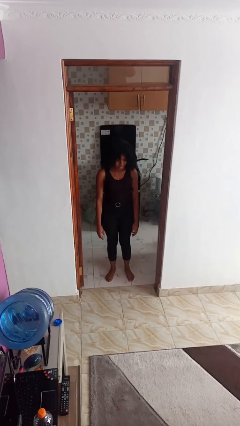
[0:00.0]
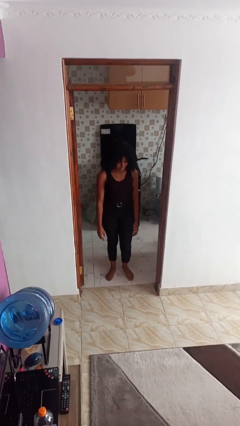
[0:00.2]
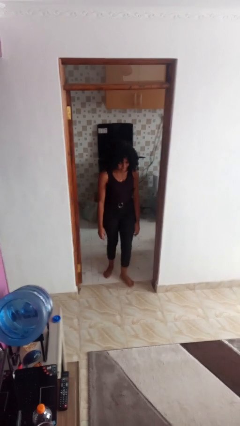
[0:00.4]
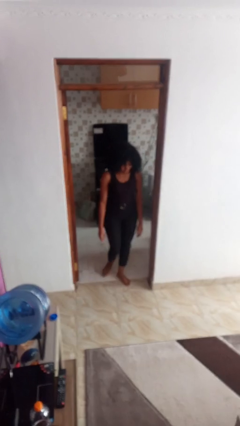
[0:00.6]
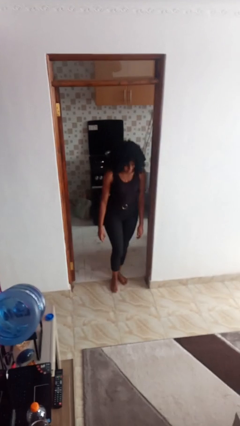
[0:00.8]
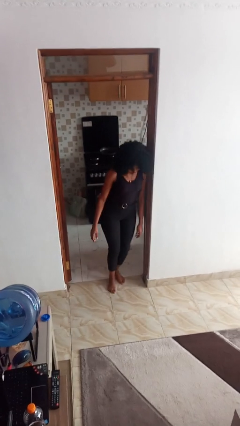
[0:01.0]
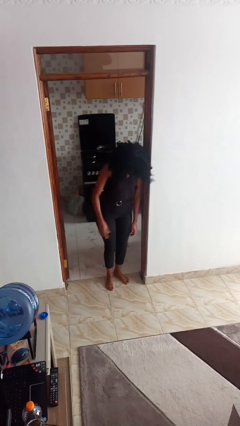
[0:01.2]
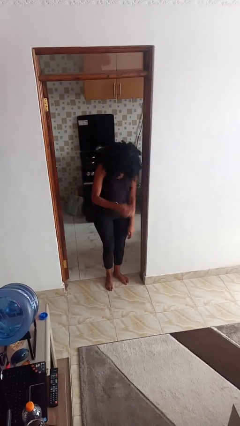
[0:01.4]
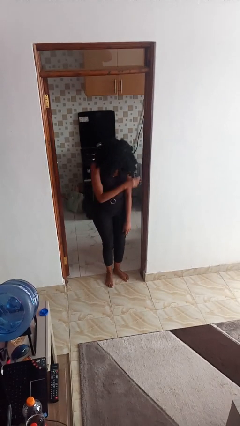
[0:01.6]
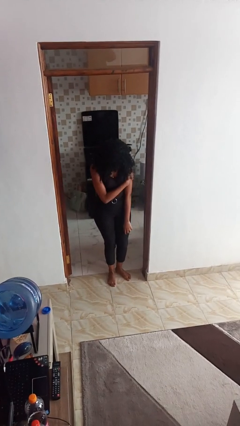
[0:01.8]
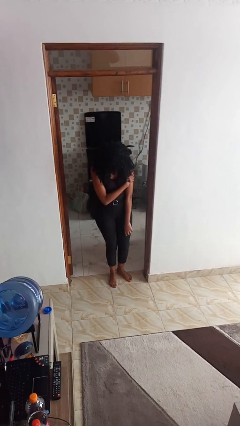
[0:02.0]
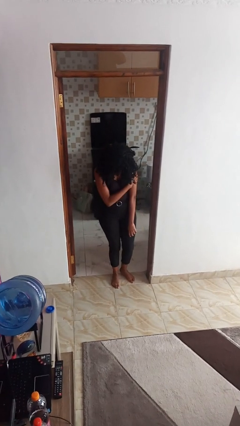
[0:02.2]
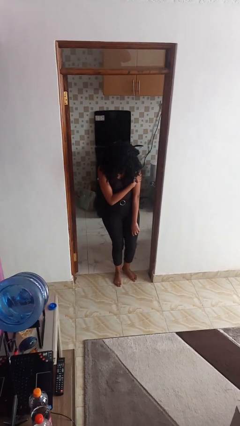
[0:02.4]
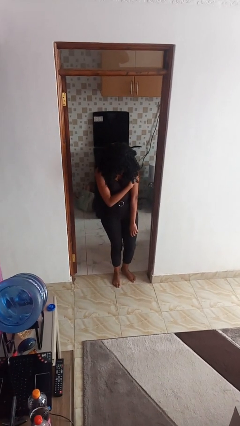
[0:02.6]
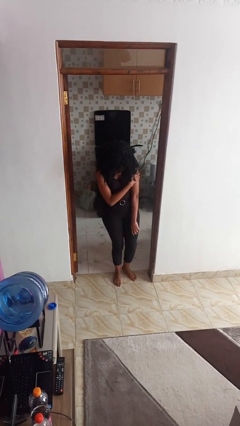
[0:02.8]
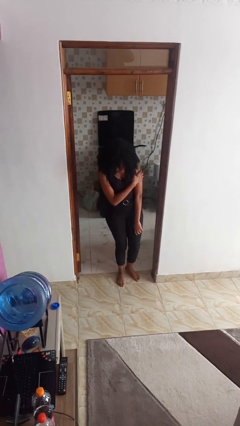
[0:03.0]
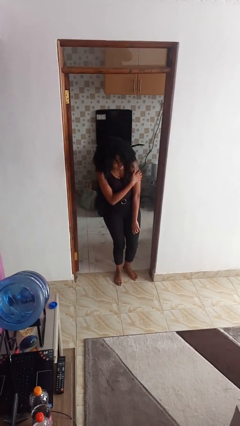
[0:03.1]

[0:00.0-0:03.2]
person bumps into wall

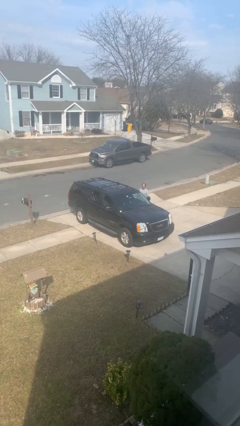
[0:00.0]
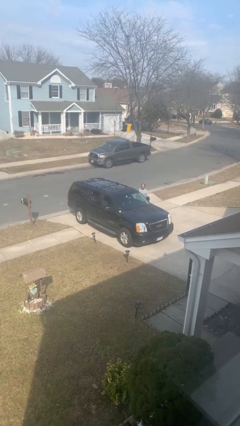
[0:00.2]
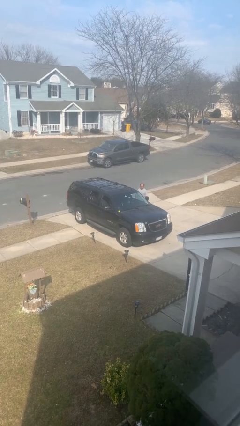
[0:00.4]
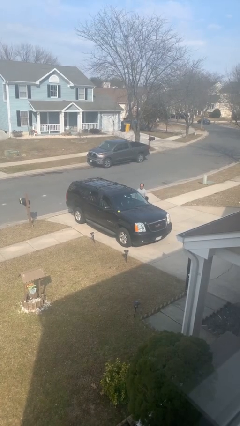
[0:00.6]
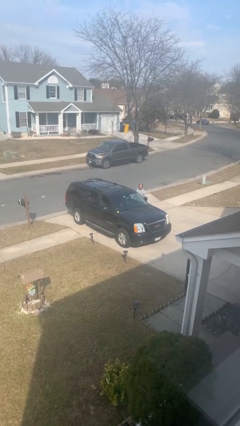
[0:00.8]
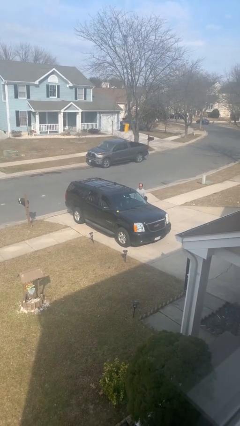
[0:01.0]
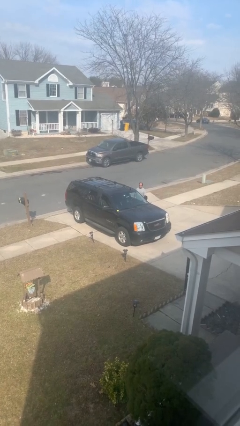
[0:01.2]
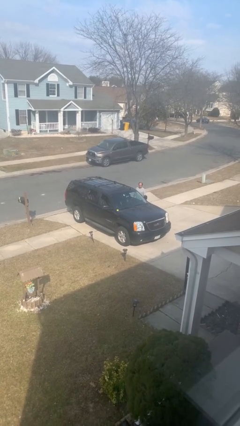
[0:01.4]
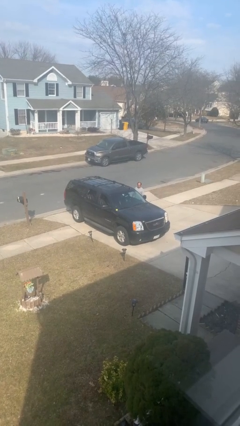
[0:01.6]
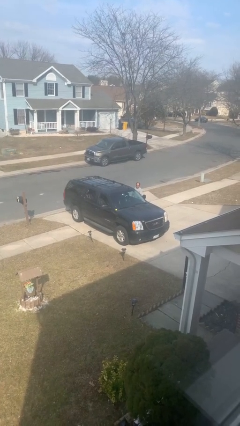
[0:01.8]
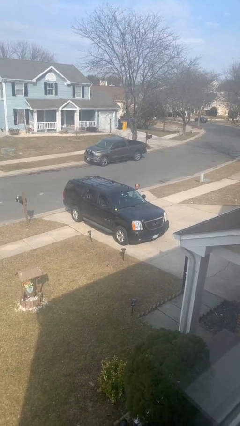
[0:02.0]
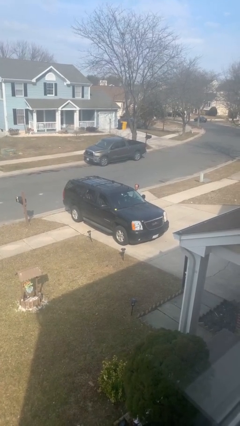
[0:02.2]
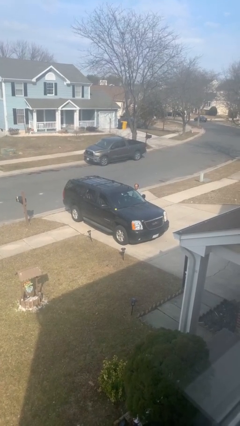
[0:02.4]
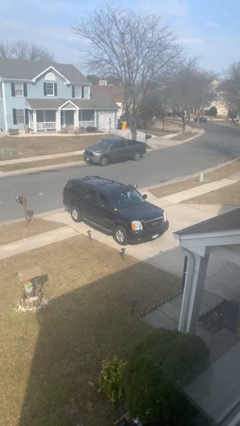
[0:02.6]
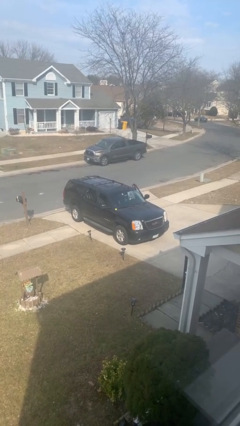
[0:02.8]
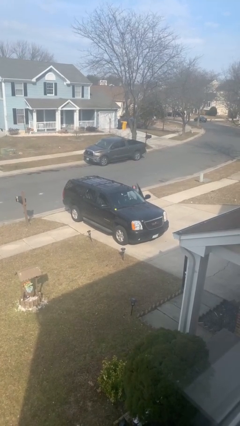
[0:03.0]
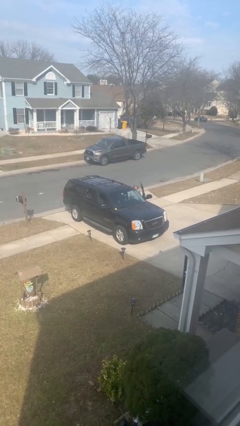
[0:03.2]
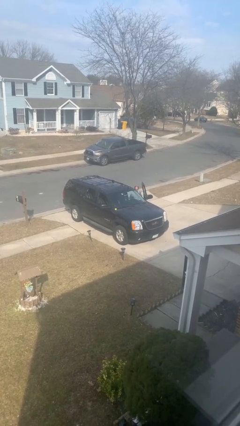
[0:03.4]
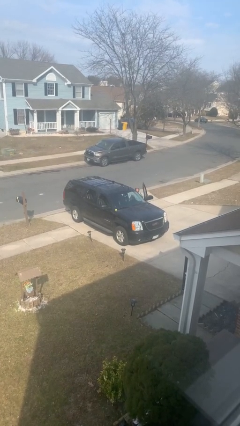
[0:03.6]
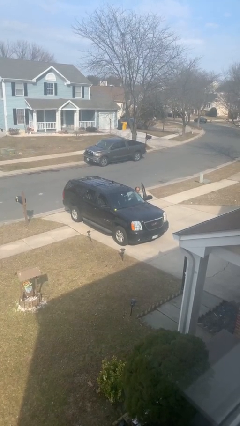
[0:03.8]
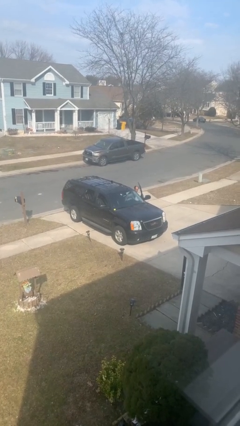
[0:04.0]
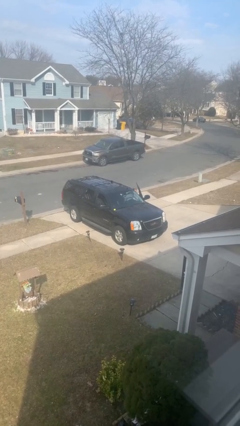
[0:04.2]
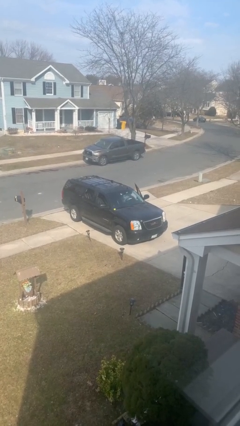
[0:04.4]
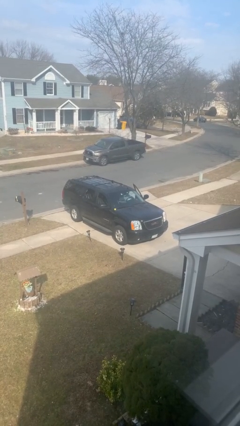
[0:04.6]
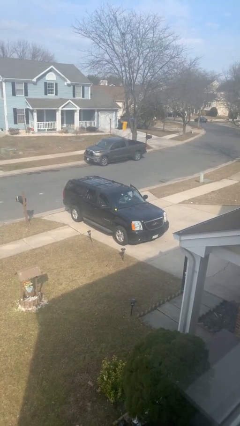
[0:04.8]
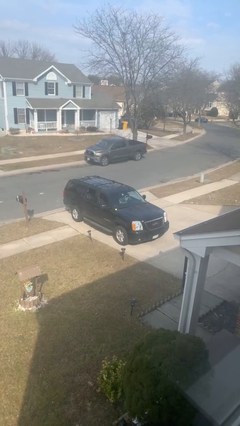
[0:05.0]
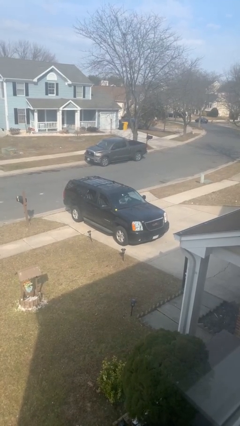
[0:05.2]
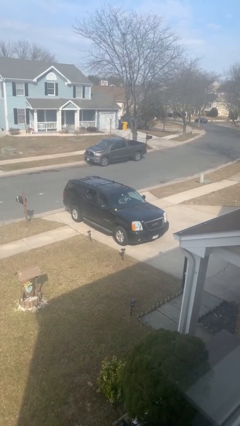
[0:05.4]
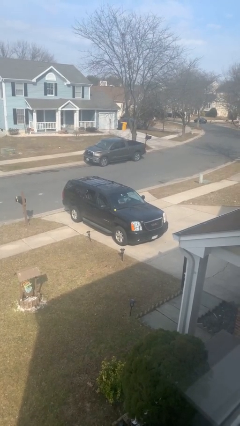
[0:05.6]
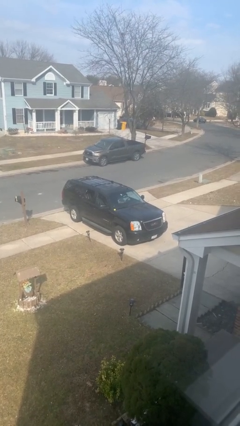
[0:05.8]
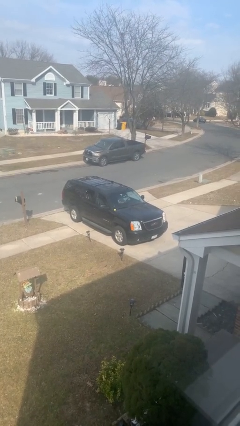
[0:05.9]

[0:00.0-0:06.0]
car picks up person

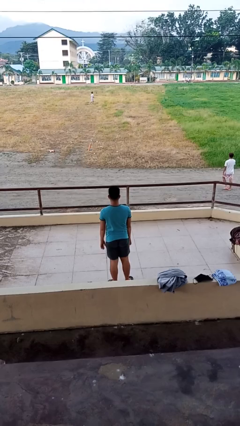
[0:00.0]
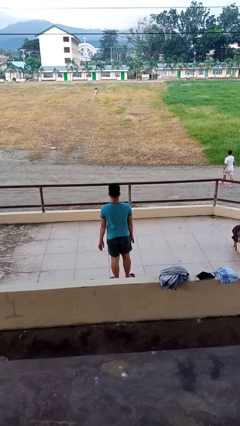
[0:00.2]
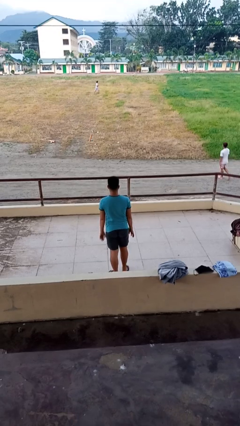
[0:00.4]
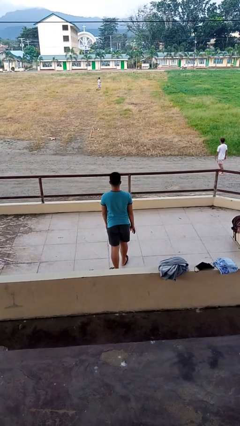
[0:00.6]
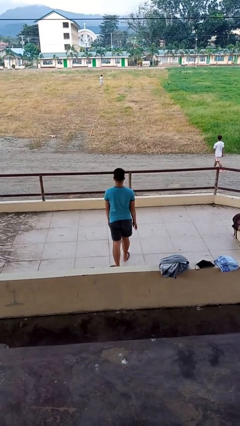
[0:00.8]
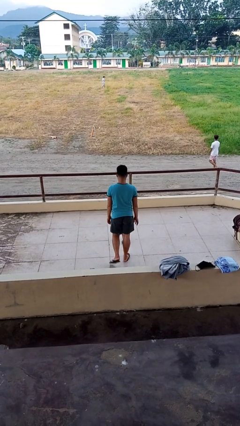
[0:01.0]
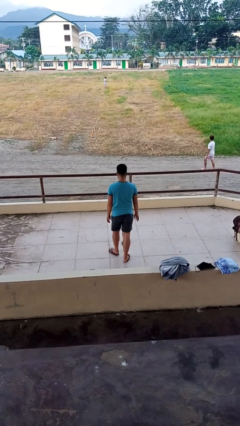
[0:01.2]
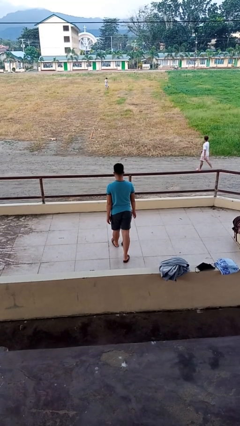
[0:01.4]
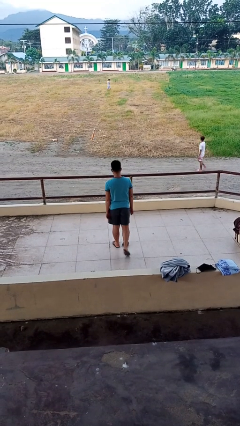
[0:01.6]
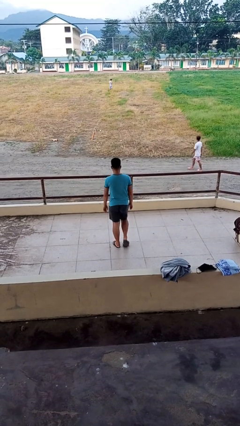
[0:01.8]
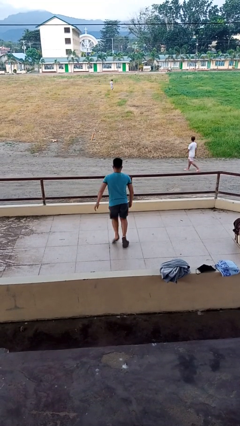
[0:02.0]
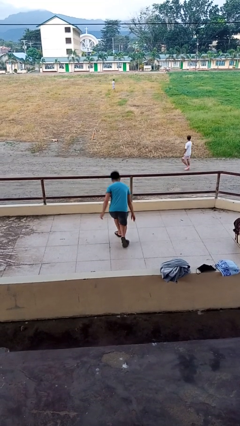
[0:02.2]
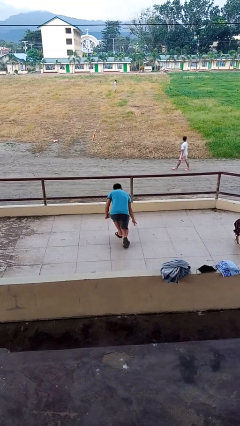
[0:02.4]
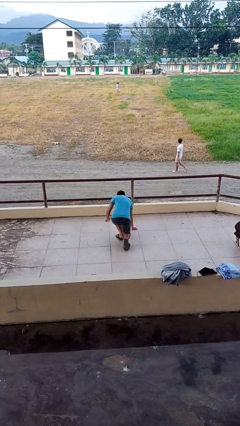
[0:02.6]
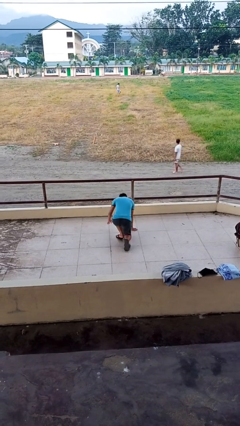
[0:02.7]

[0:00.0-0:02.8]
person trips on object on floor

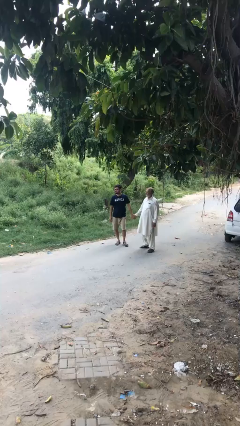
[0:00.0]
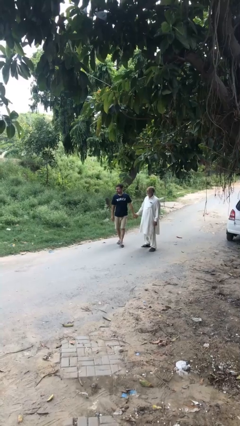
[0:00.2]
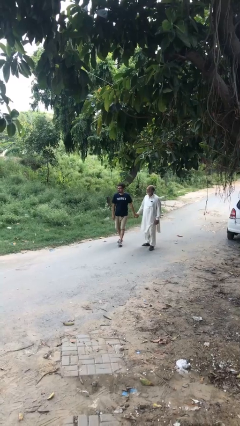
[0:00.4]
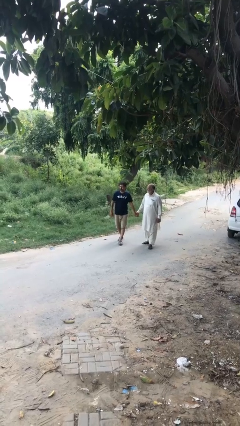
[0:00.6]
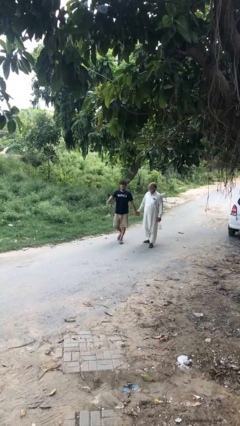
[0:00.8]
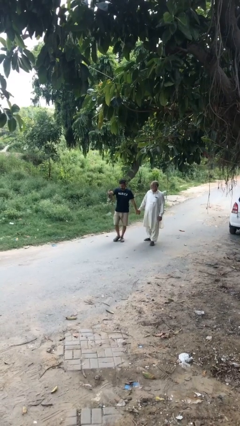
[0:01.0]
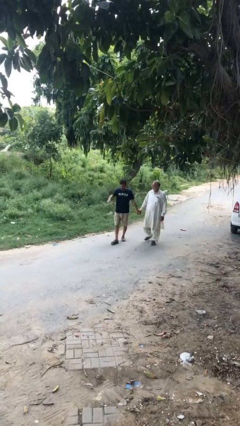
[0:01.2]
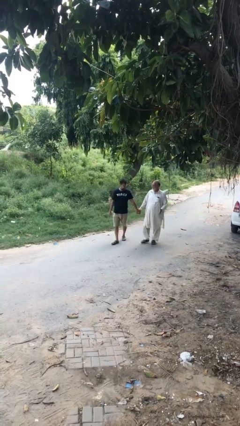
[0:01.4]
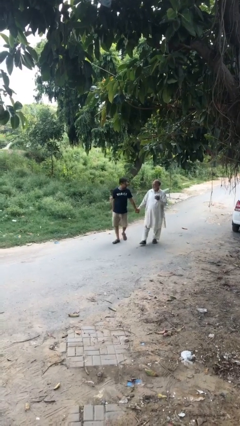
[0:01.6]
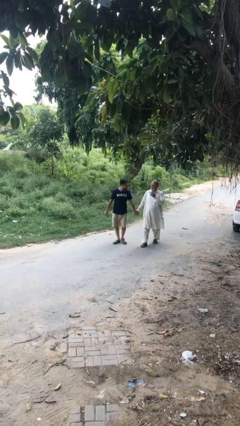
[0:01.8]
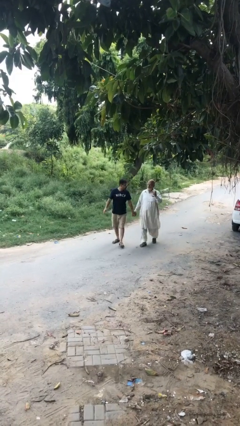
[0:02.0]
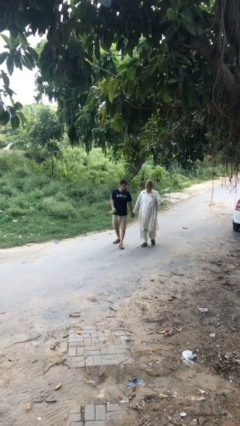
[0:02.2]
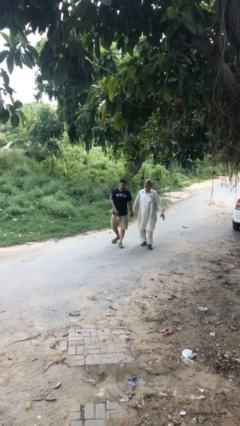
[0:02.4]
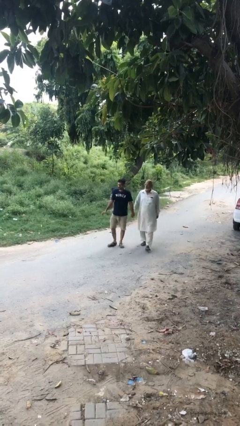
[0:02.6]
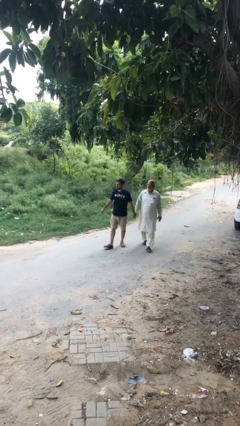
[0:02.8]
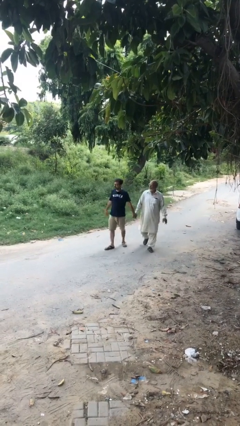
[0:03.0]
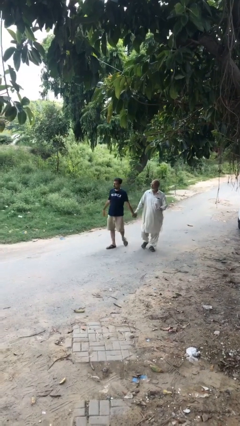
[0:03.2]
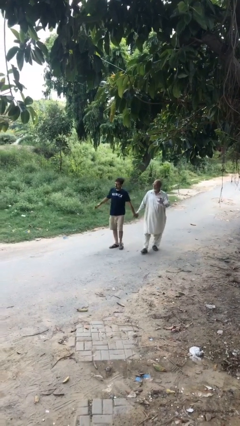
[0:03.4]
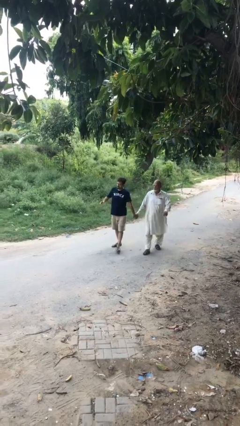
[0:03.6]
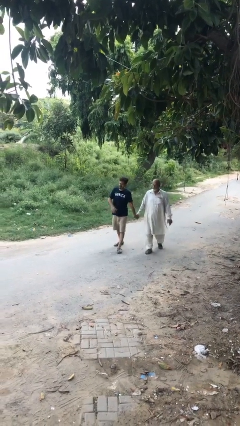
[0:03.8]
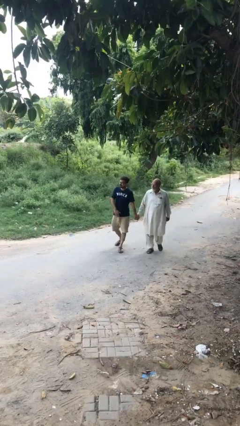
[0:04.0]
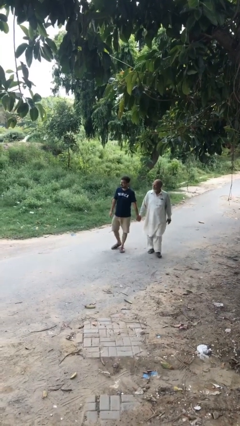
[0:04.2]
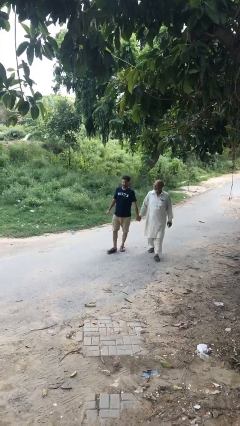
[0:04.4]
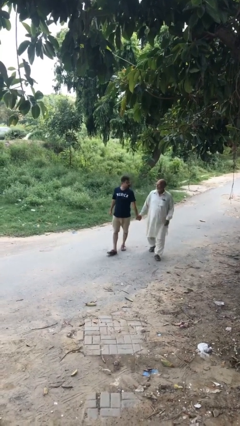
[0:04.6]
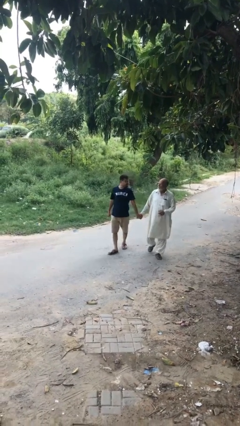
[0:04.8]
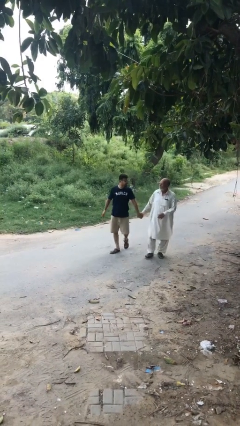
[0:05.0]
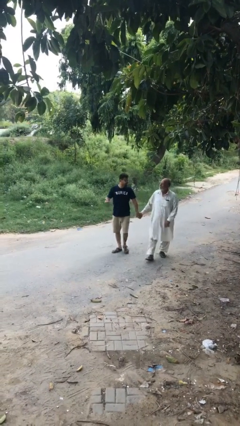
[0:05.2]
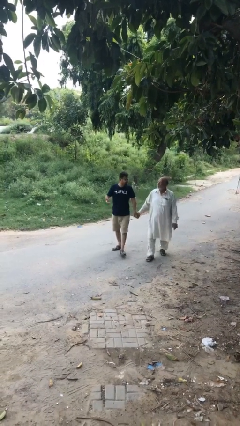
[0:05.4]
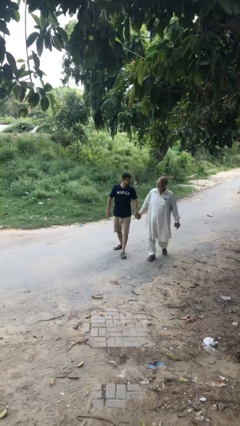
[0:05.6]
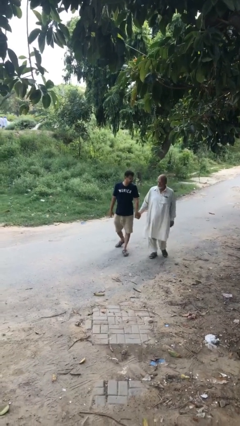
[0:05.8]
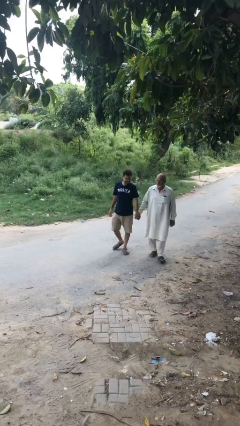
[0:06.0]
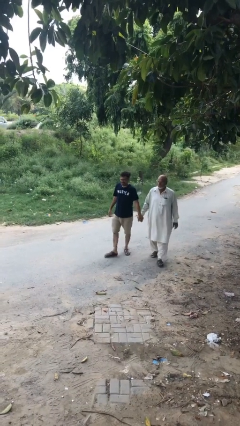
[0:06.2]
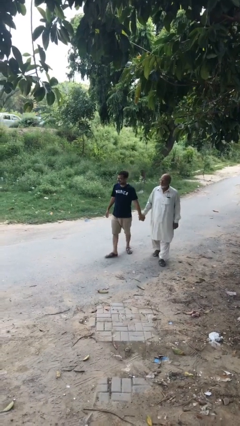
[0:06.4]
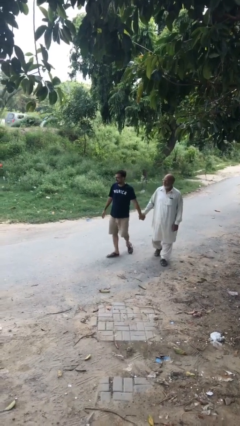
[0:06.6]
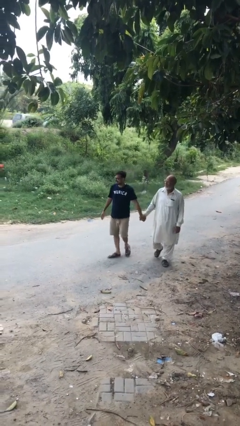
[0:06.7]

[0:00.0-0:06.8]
person holds hand
